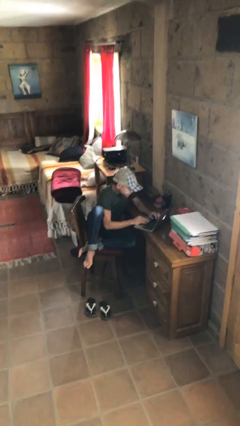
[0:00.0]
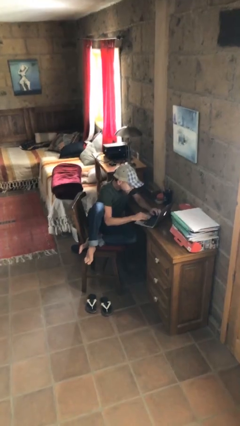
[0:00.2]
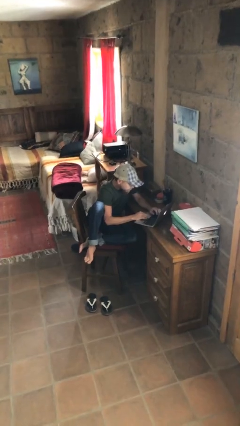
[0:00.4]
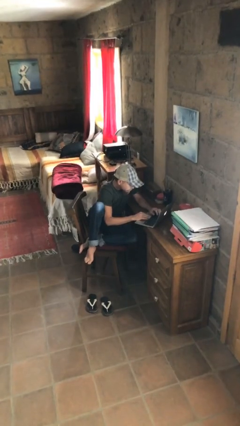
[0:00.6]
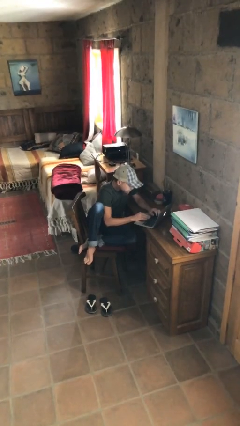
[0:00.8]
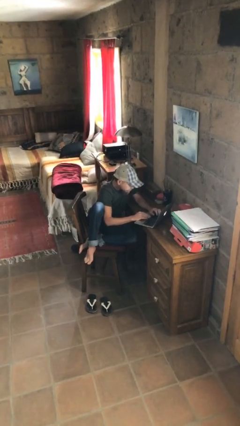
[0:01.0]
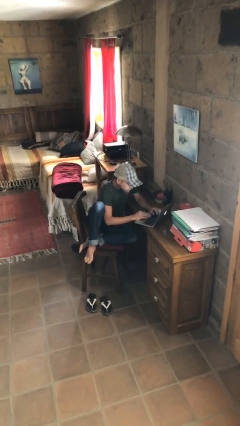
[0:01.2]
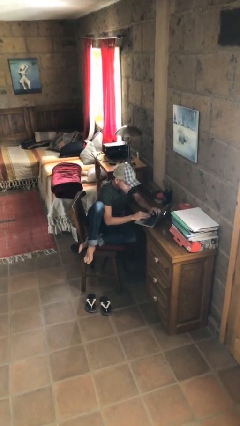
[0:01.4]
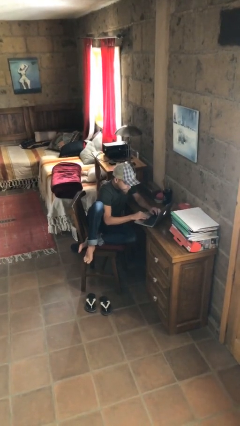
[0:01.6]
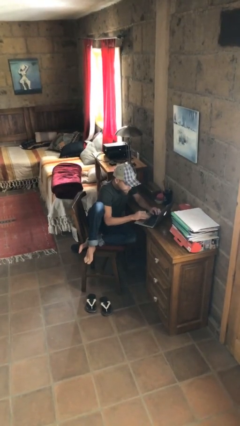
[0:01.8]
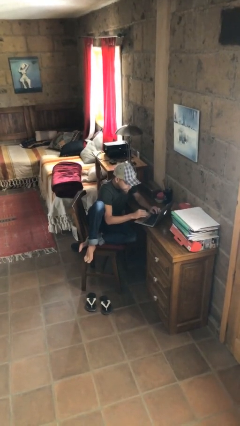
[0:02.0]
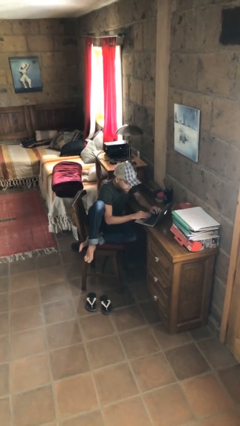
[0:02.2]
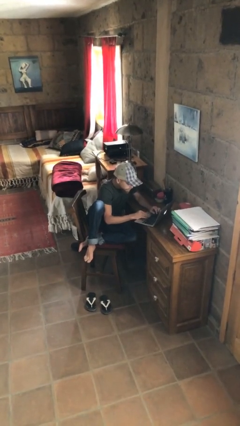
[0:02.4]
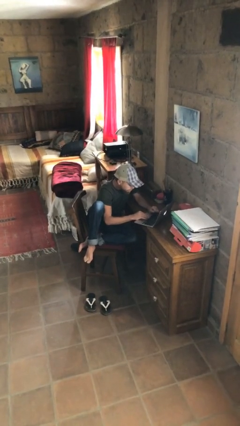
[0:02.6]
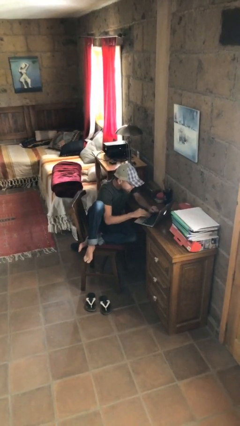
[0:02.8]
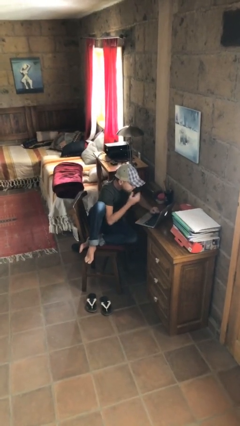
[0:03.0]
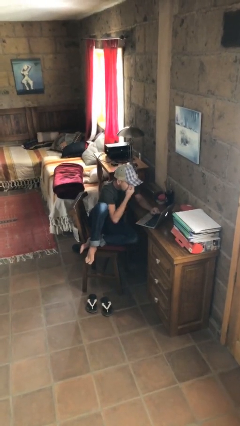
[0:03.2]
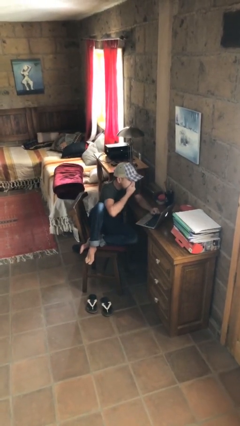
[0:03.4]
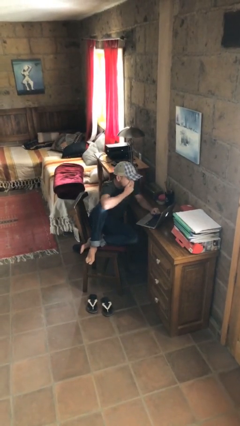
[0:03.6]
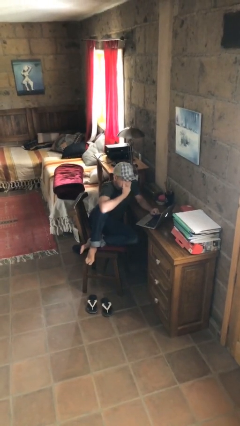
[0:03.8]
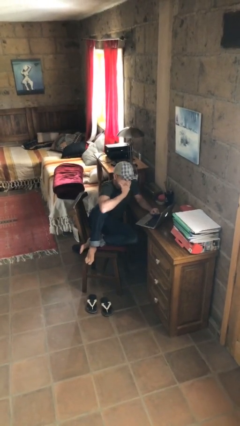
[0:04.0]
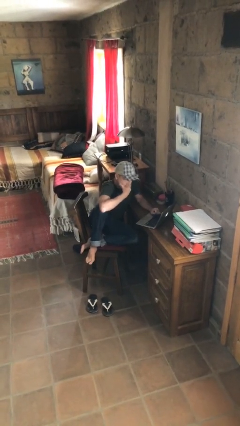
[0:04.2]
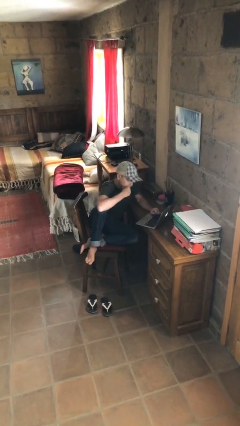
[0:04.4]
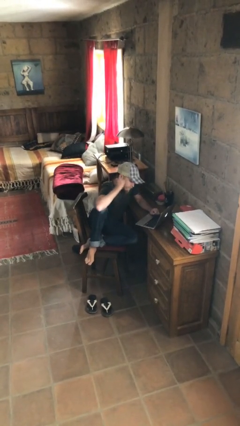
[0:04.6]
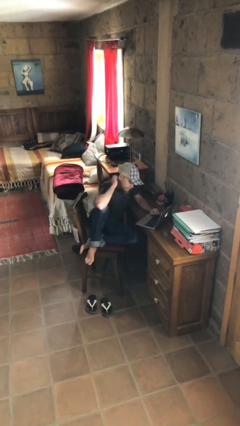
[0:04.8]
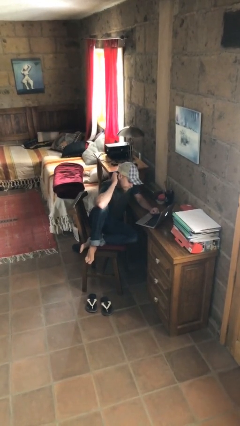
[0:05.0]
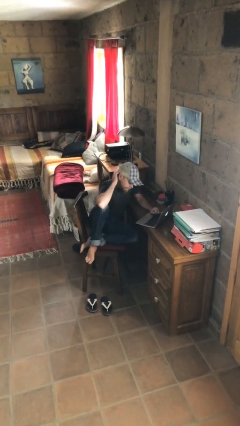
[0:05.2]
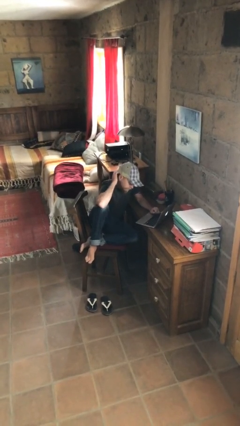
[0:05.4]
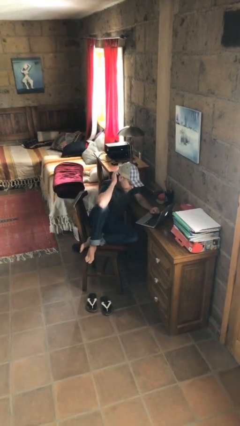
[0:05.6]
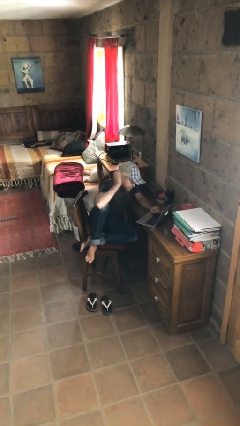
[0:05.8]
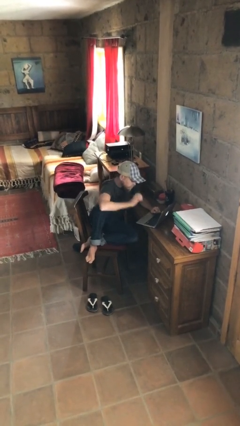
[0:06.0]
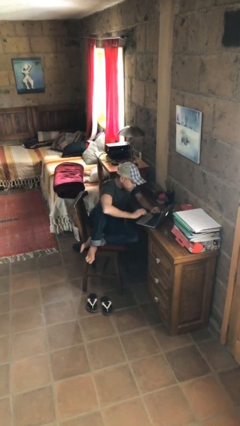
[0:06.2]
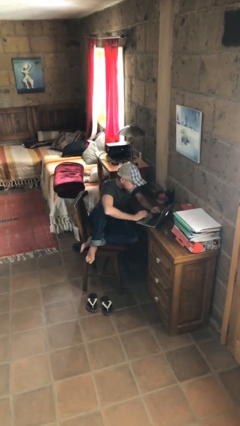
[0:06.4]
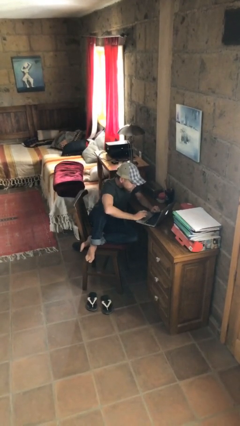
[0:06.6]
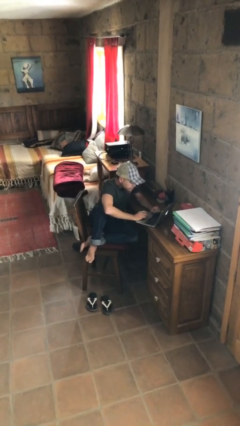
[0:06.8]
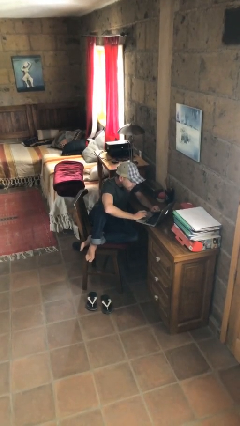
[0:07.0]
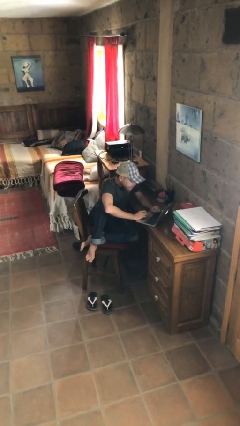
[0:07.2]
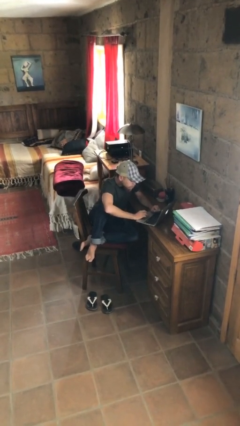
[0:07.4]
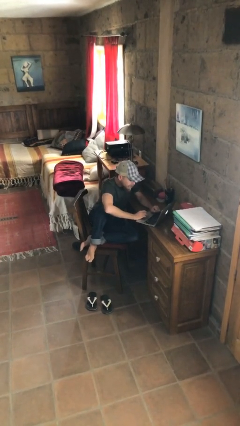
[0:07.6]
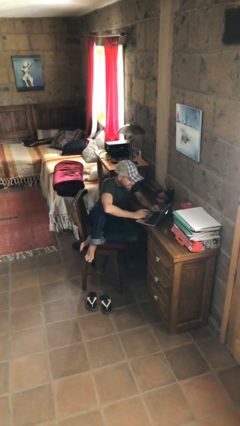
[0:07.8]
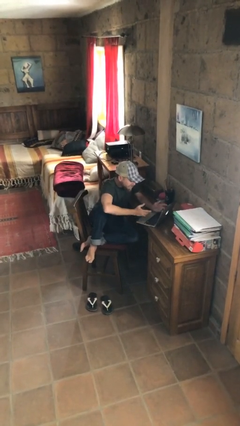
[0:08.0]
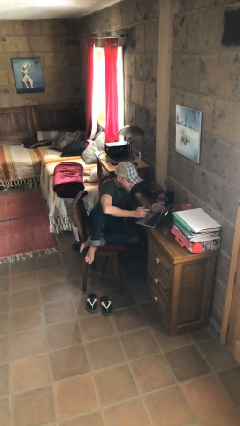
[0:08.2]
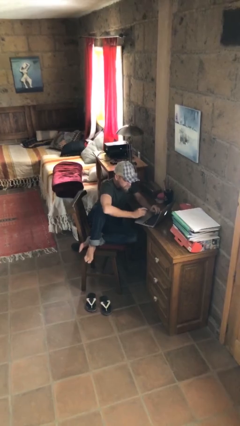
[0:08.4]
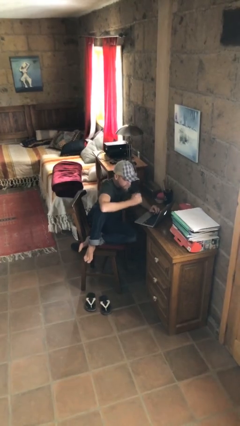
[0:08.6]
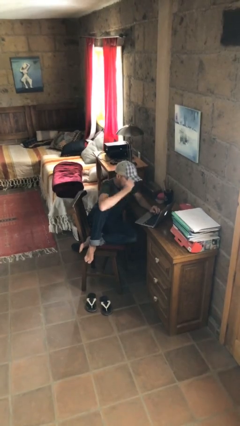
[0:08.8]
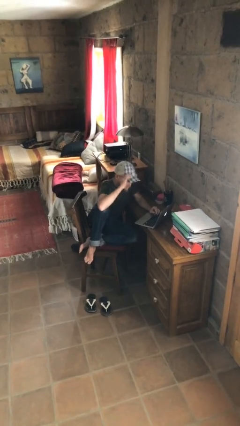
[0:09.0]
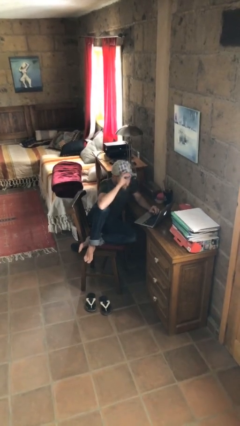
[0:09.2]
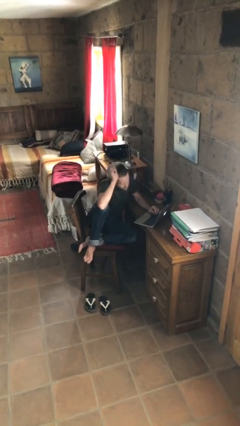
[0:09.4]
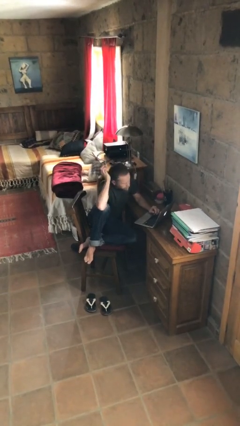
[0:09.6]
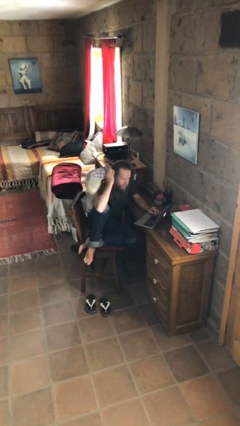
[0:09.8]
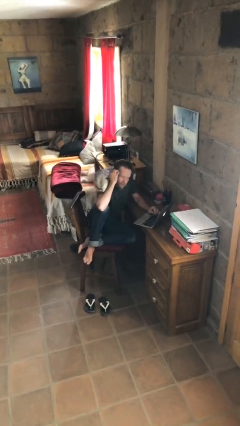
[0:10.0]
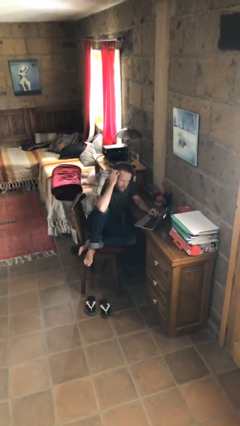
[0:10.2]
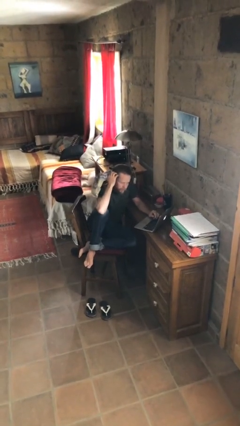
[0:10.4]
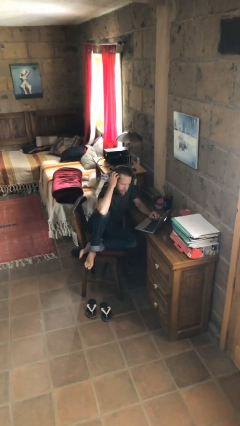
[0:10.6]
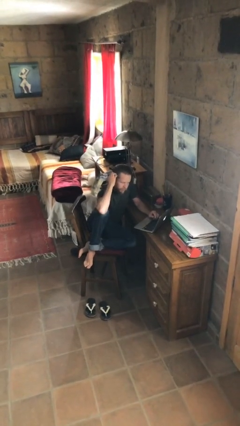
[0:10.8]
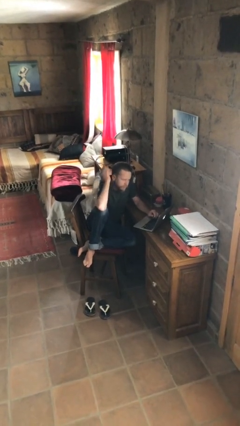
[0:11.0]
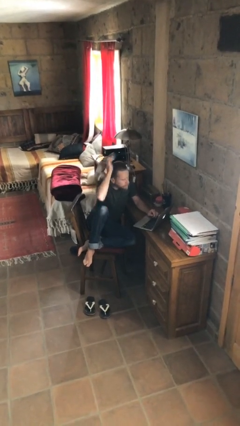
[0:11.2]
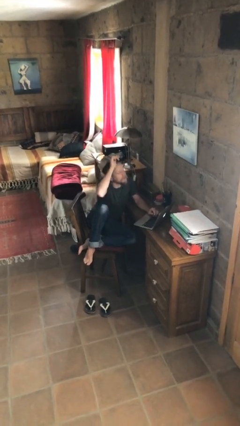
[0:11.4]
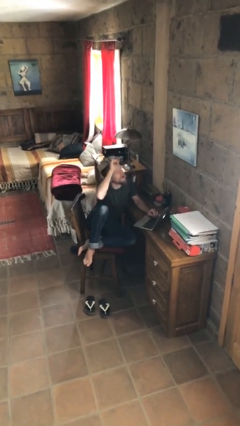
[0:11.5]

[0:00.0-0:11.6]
person interacts with laptop

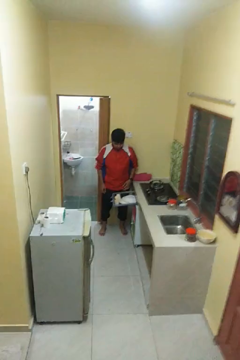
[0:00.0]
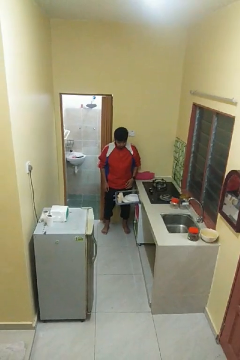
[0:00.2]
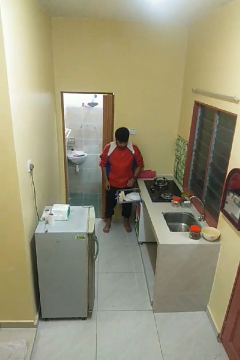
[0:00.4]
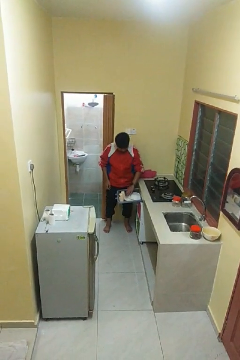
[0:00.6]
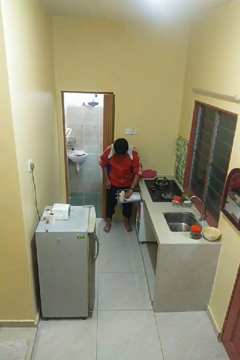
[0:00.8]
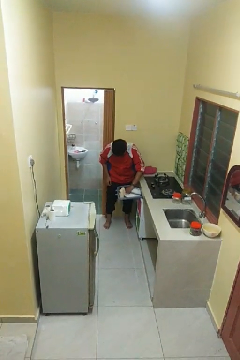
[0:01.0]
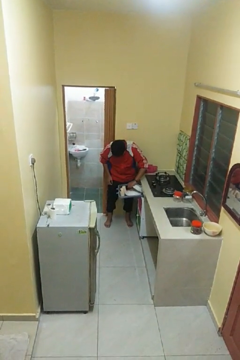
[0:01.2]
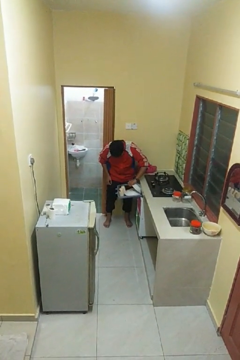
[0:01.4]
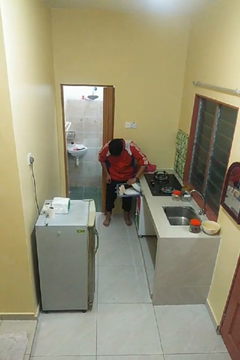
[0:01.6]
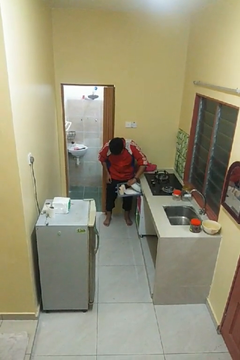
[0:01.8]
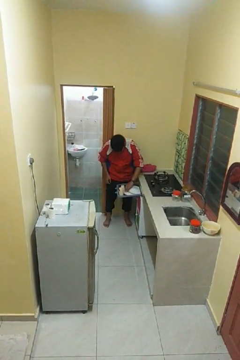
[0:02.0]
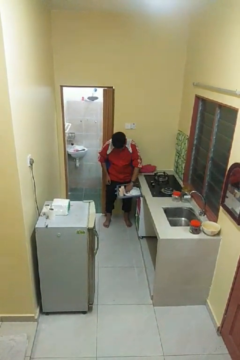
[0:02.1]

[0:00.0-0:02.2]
person searches in kitchen drawer

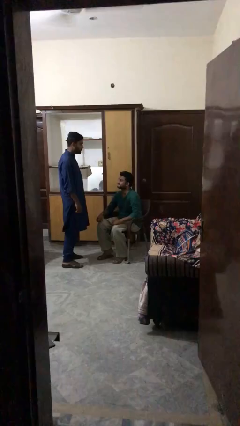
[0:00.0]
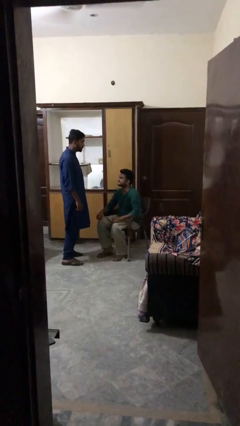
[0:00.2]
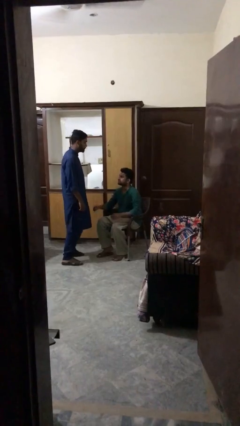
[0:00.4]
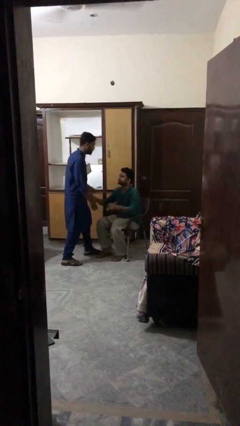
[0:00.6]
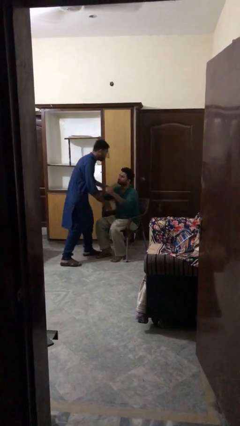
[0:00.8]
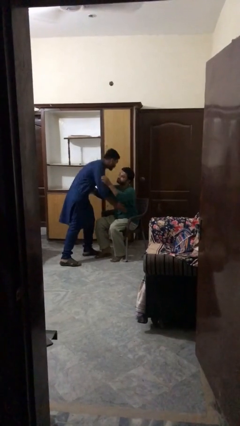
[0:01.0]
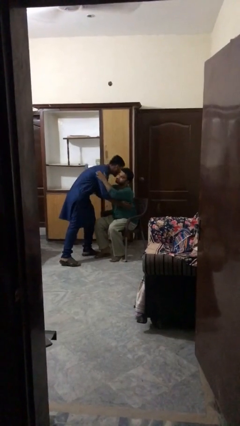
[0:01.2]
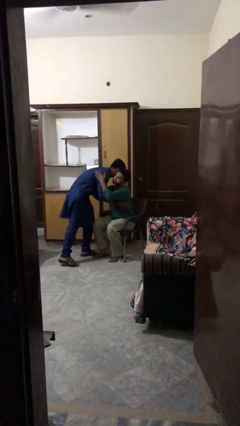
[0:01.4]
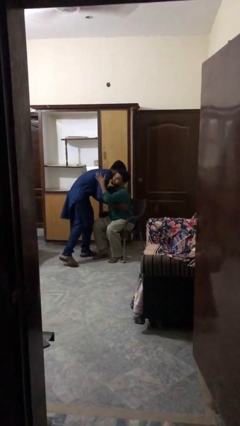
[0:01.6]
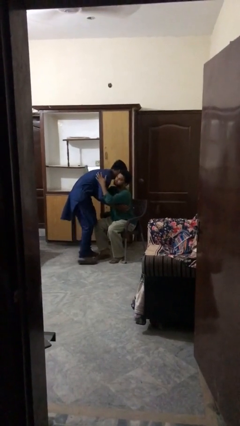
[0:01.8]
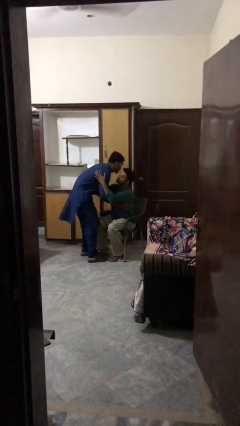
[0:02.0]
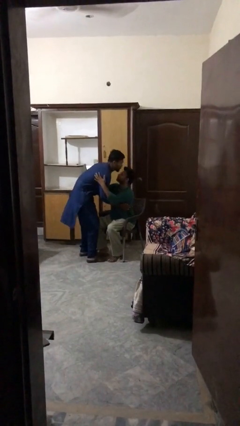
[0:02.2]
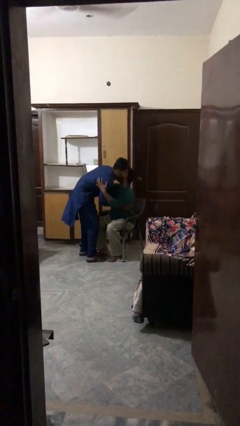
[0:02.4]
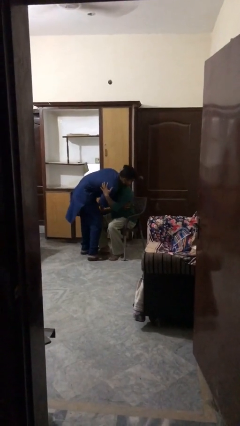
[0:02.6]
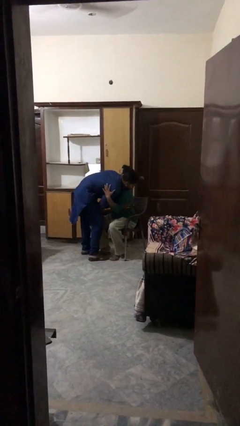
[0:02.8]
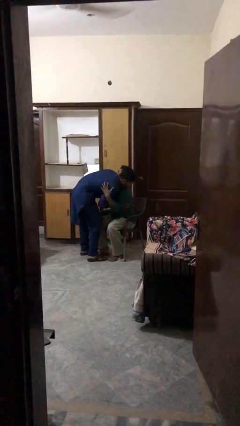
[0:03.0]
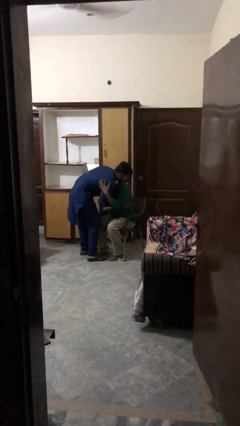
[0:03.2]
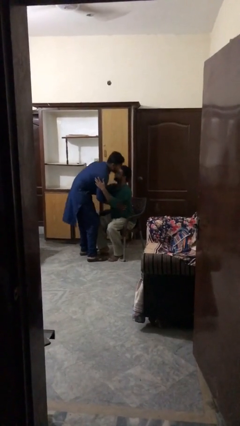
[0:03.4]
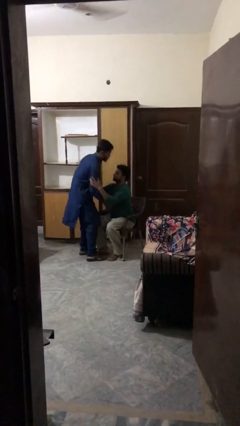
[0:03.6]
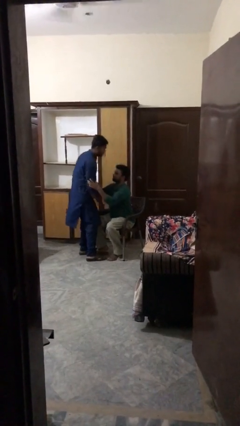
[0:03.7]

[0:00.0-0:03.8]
person embraces person

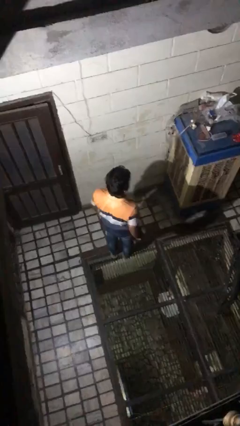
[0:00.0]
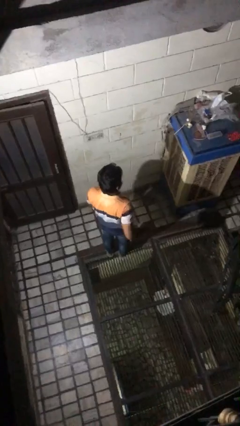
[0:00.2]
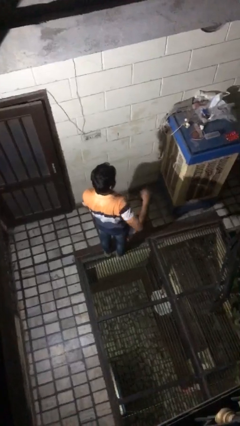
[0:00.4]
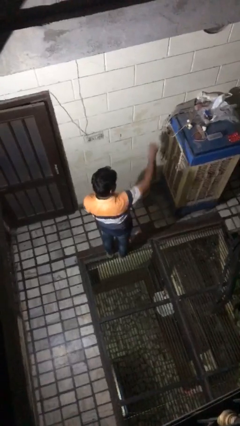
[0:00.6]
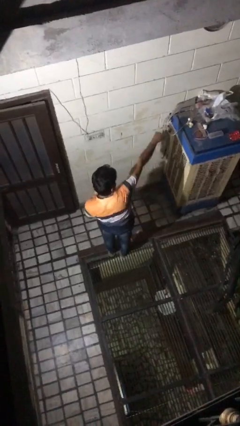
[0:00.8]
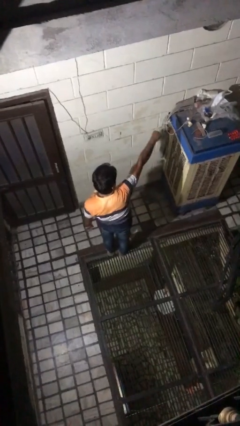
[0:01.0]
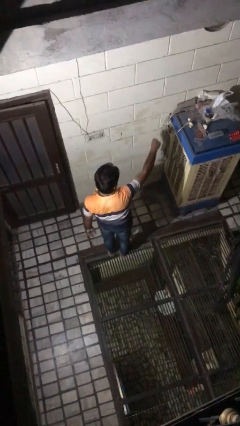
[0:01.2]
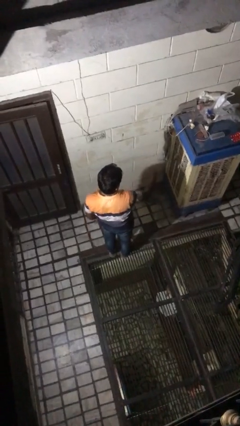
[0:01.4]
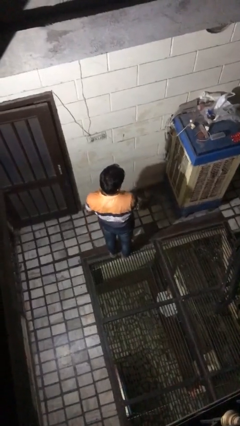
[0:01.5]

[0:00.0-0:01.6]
person punches
